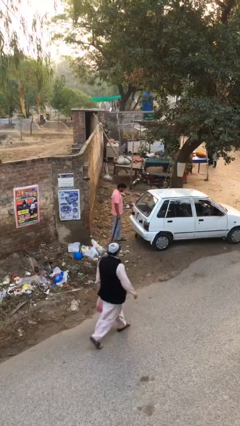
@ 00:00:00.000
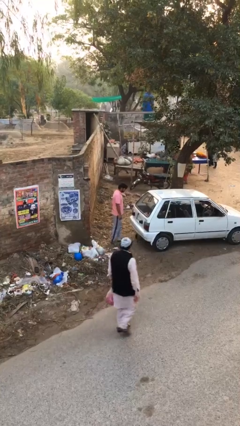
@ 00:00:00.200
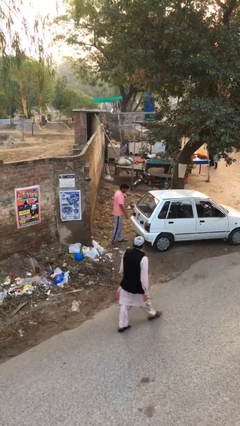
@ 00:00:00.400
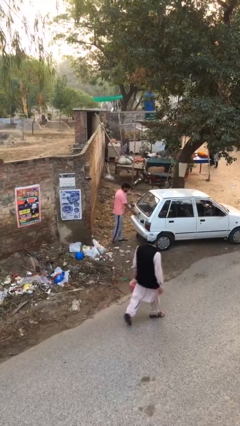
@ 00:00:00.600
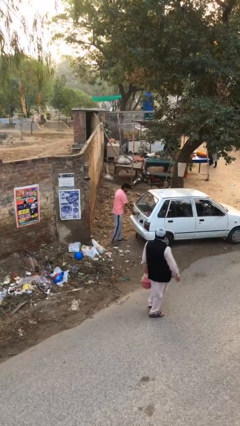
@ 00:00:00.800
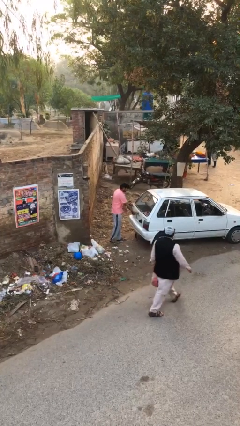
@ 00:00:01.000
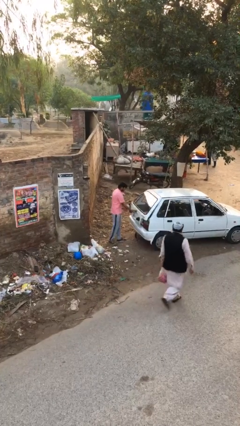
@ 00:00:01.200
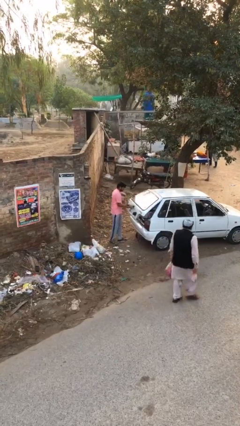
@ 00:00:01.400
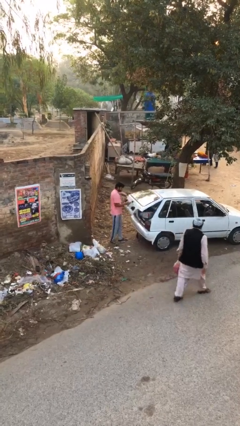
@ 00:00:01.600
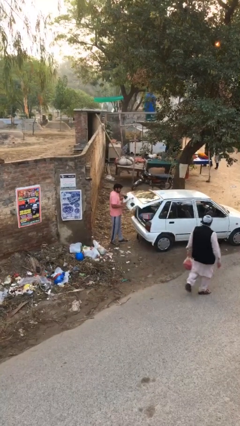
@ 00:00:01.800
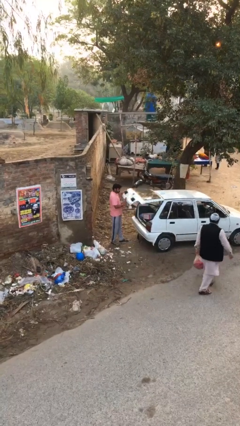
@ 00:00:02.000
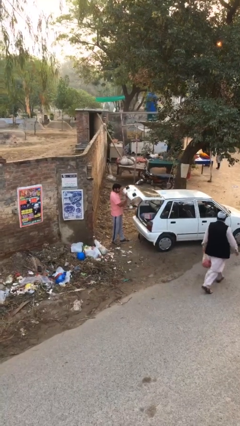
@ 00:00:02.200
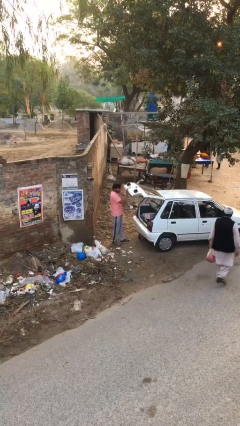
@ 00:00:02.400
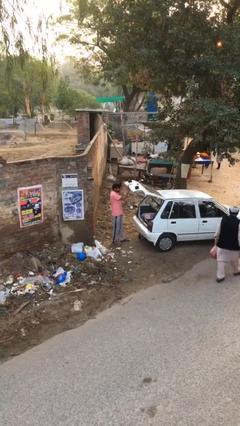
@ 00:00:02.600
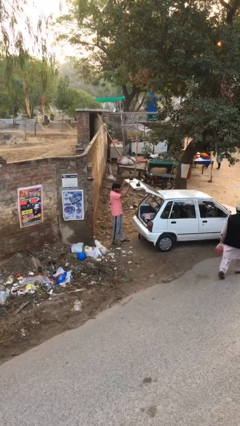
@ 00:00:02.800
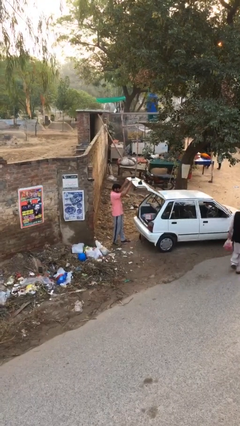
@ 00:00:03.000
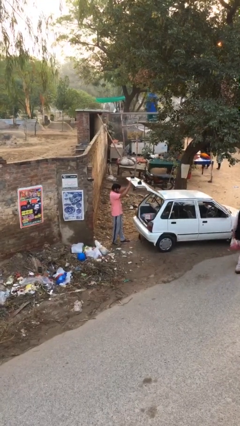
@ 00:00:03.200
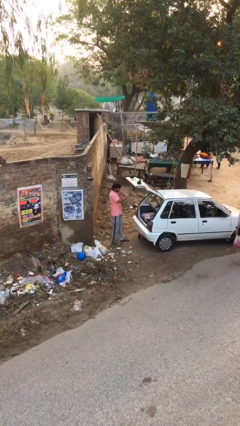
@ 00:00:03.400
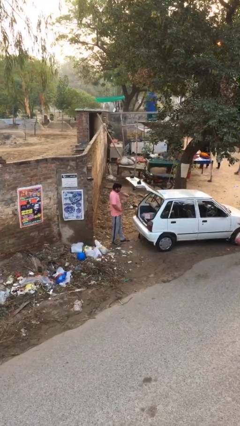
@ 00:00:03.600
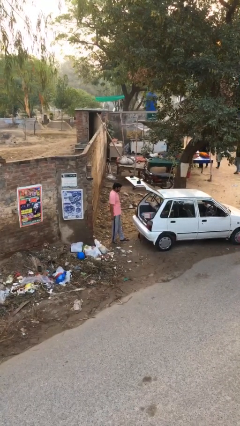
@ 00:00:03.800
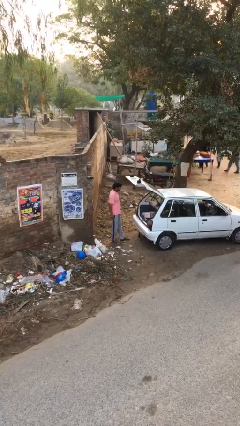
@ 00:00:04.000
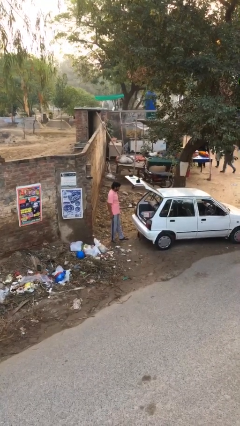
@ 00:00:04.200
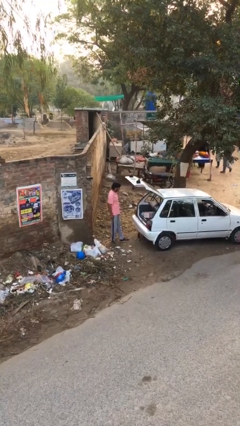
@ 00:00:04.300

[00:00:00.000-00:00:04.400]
person opens car trunk

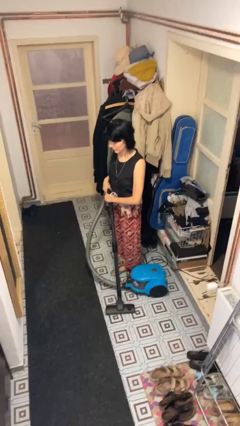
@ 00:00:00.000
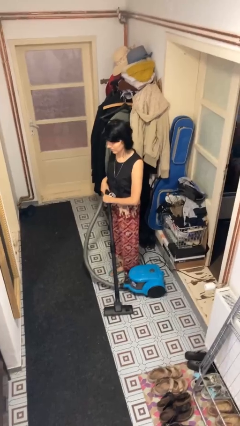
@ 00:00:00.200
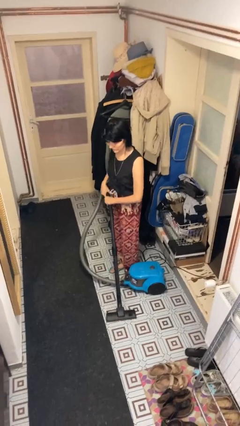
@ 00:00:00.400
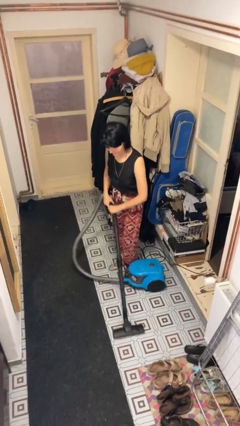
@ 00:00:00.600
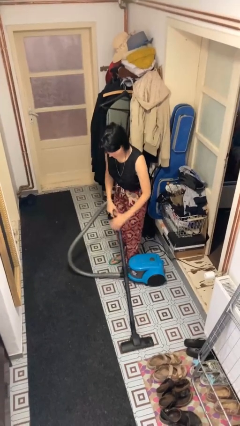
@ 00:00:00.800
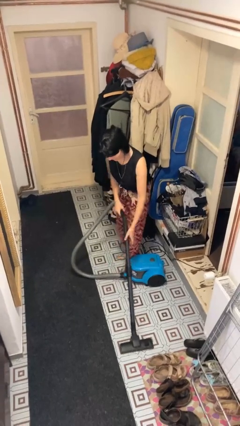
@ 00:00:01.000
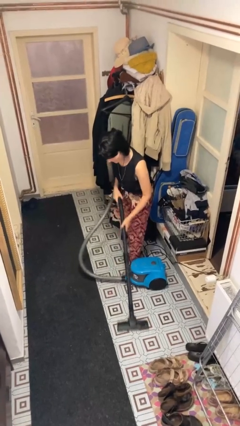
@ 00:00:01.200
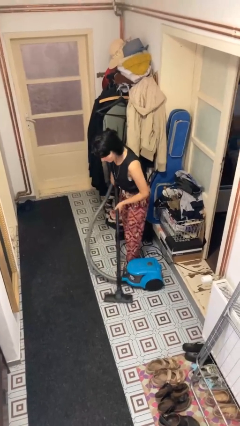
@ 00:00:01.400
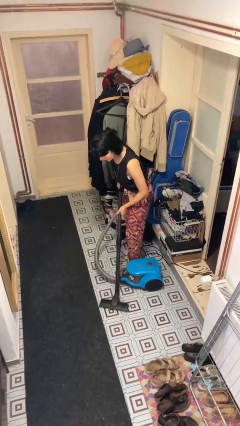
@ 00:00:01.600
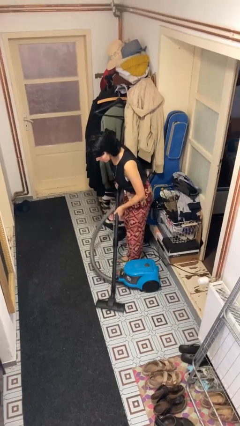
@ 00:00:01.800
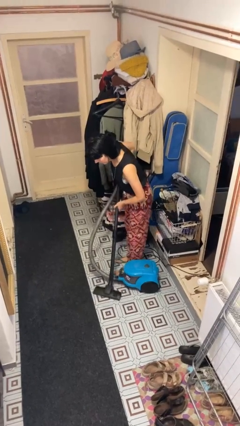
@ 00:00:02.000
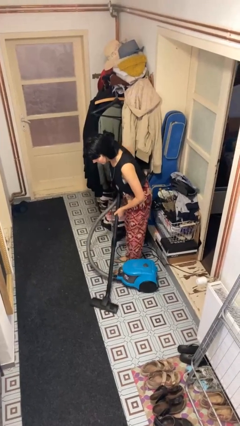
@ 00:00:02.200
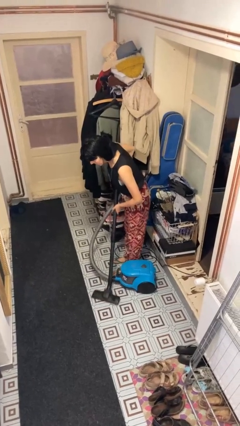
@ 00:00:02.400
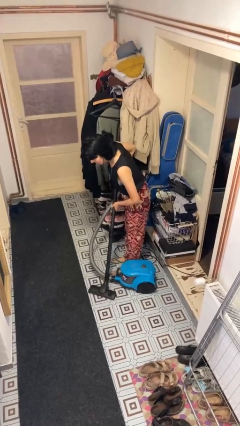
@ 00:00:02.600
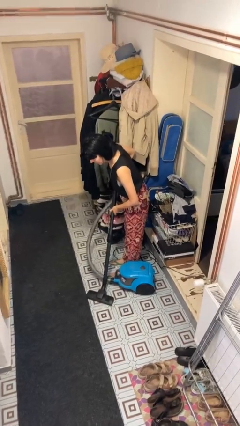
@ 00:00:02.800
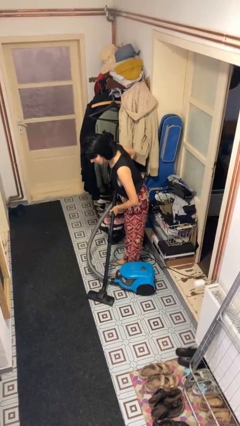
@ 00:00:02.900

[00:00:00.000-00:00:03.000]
person vacuums carpet

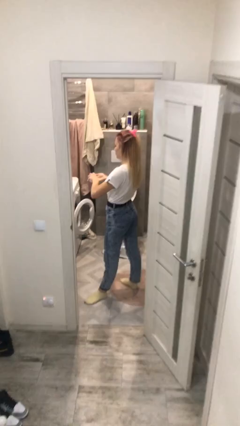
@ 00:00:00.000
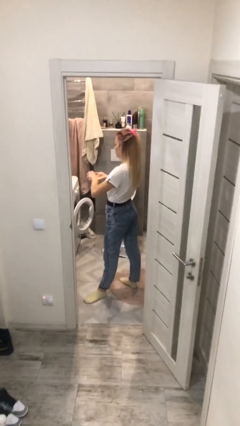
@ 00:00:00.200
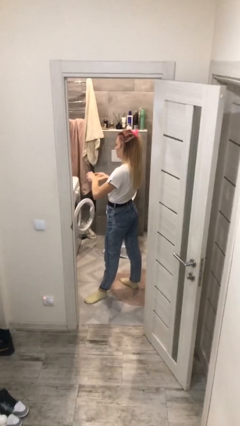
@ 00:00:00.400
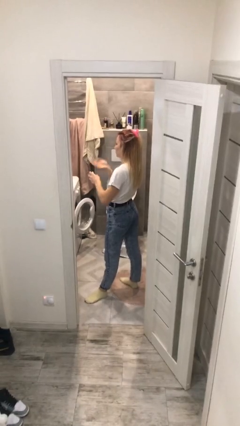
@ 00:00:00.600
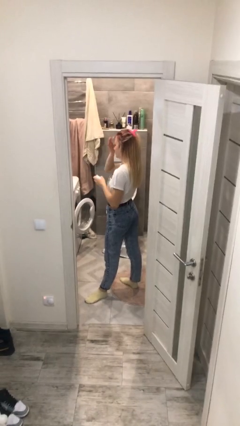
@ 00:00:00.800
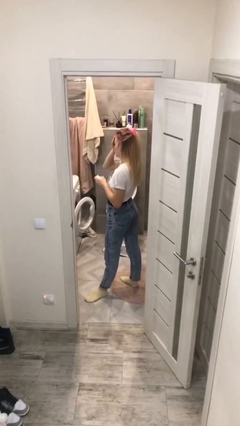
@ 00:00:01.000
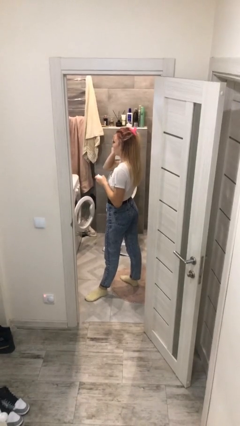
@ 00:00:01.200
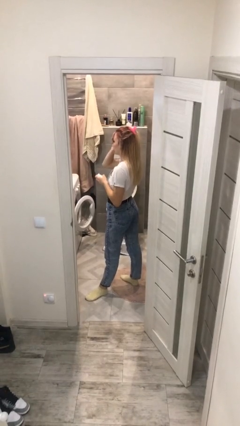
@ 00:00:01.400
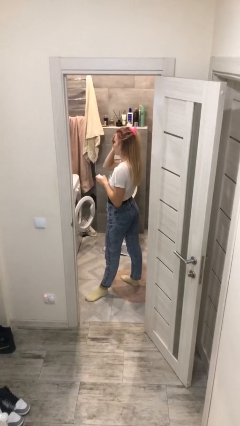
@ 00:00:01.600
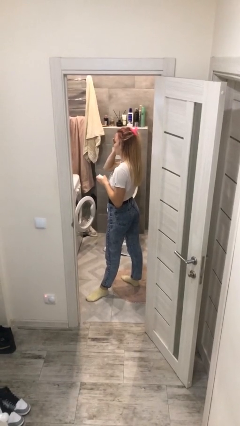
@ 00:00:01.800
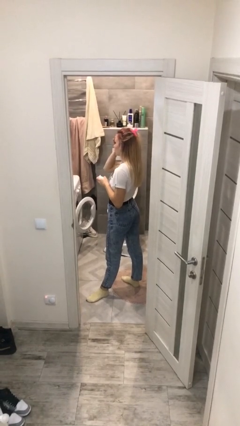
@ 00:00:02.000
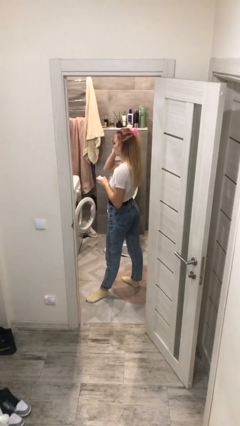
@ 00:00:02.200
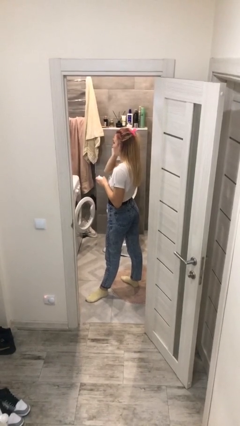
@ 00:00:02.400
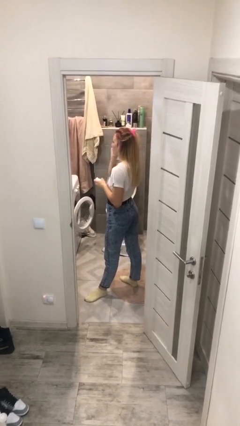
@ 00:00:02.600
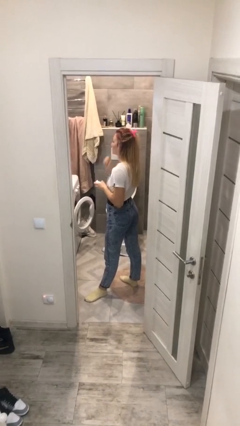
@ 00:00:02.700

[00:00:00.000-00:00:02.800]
person applies facial moisturizer

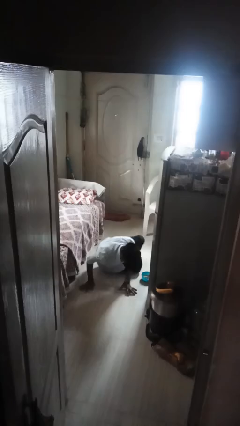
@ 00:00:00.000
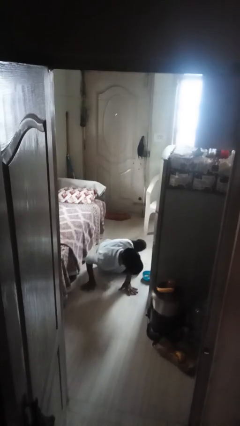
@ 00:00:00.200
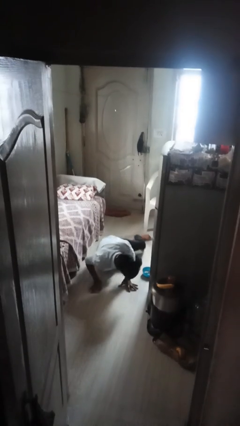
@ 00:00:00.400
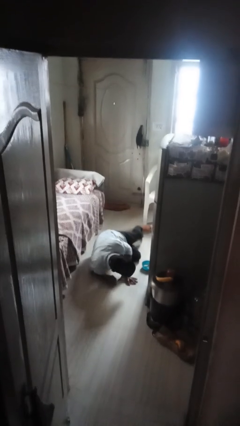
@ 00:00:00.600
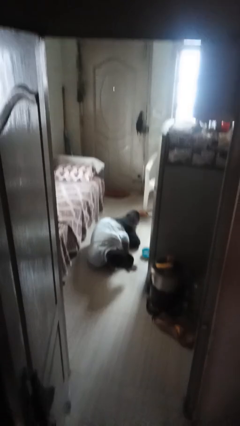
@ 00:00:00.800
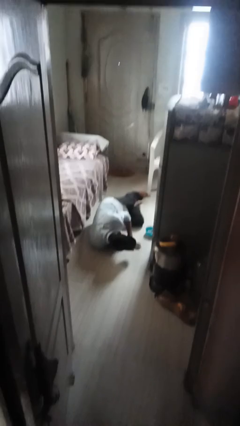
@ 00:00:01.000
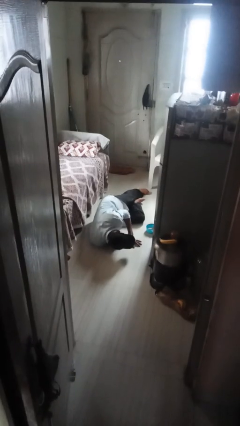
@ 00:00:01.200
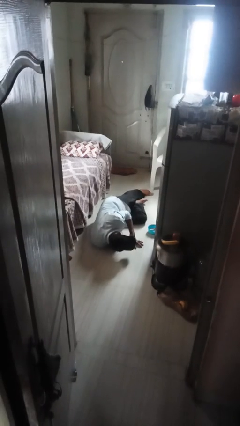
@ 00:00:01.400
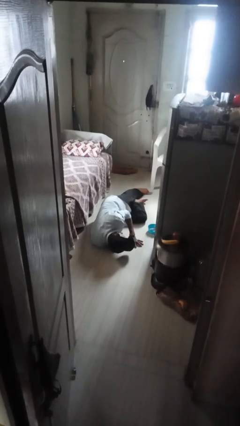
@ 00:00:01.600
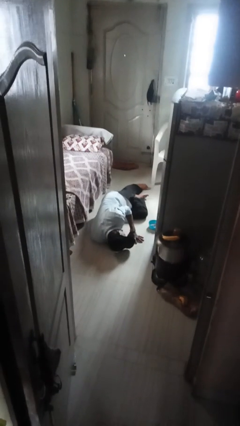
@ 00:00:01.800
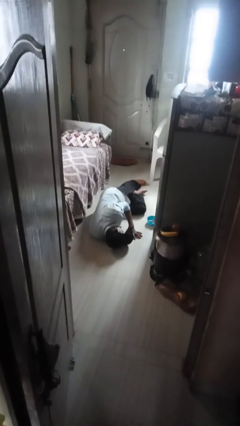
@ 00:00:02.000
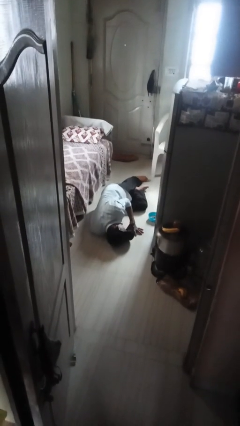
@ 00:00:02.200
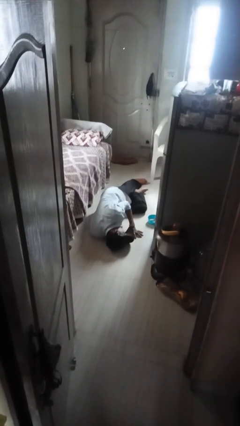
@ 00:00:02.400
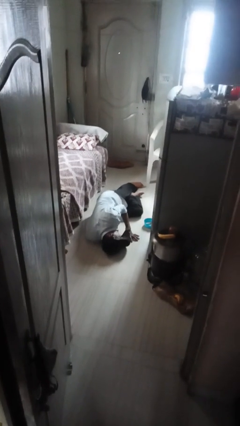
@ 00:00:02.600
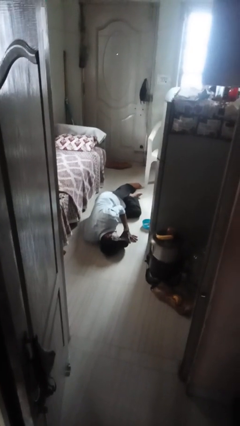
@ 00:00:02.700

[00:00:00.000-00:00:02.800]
person lies down on floor

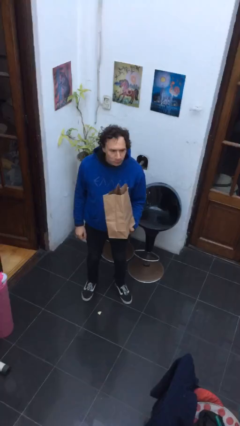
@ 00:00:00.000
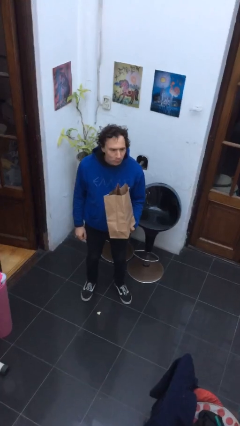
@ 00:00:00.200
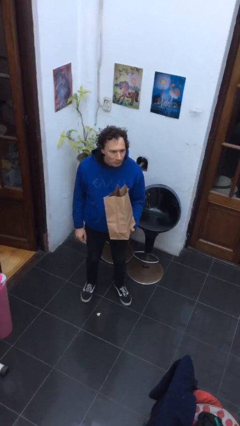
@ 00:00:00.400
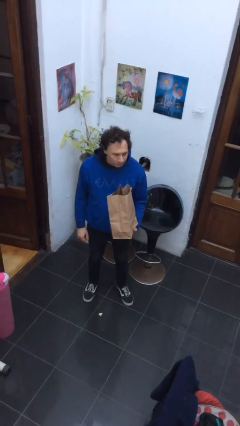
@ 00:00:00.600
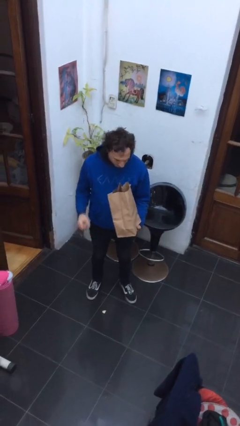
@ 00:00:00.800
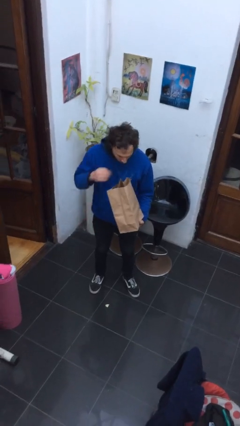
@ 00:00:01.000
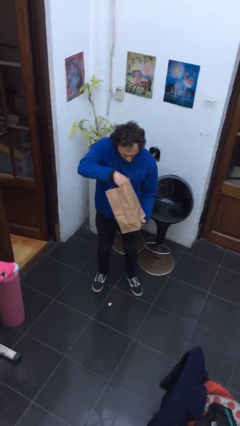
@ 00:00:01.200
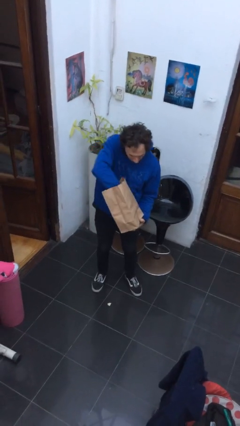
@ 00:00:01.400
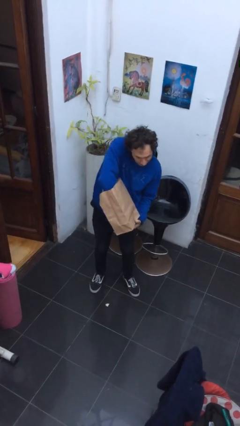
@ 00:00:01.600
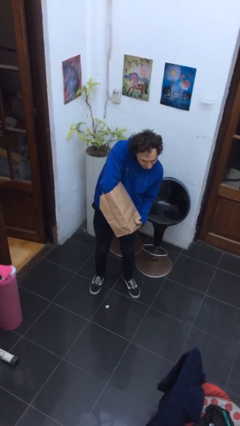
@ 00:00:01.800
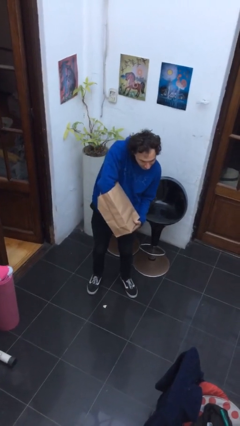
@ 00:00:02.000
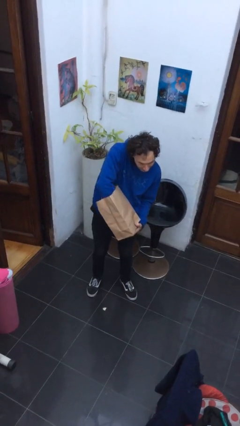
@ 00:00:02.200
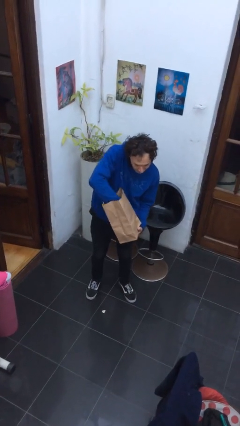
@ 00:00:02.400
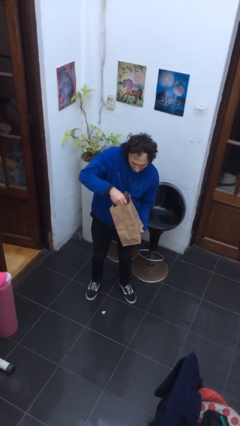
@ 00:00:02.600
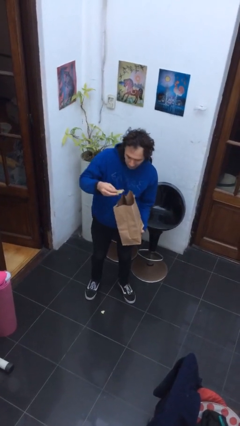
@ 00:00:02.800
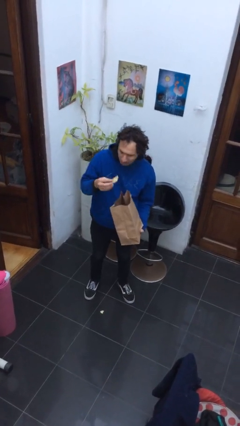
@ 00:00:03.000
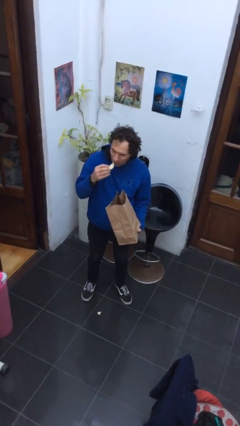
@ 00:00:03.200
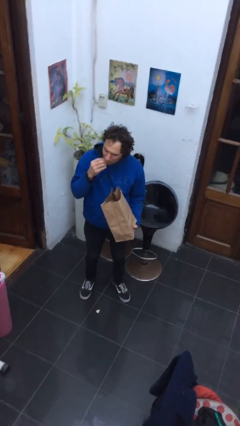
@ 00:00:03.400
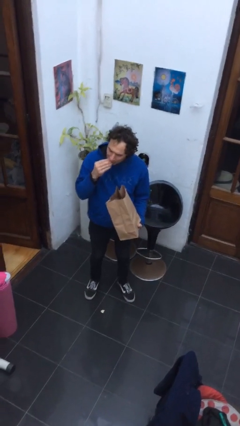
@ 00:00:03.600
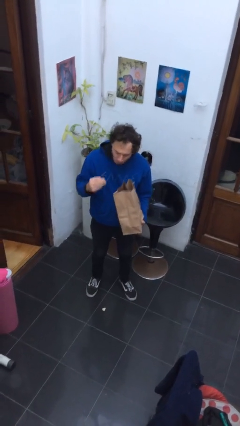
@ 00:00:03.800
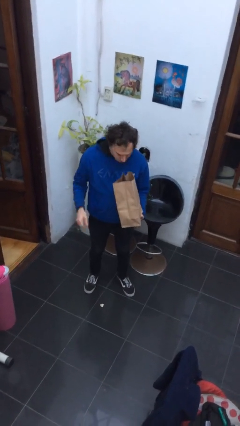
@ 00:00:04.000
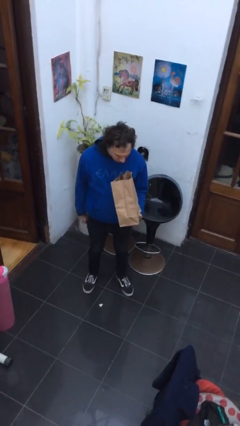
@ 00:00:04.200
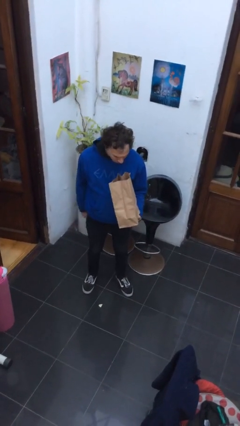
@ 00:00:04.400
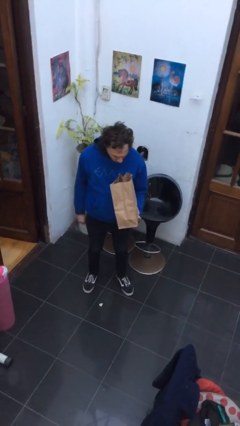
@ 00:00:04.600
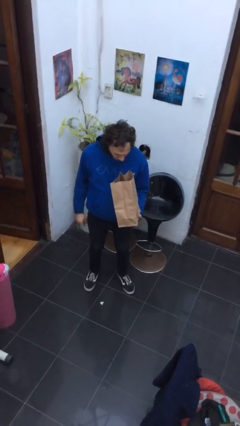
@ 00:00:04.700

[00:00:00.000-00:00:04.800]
person eats snack from bag
